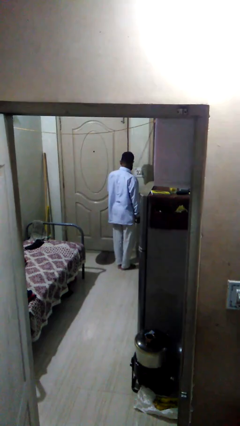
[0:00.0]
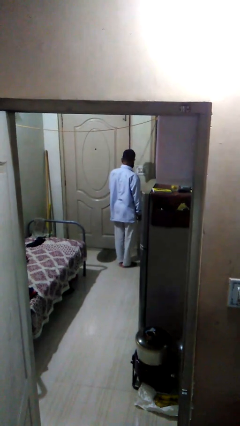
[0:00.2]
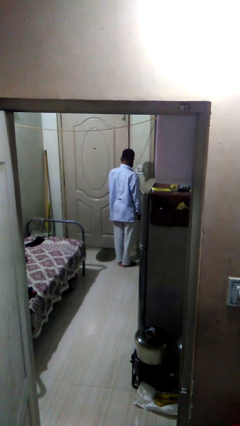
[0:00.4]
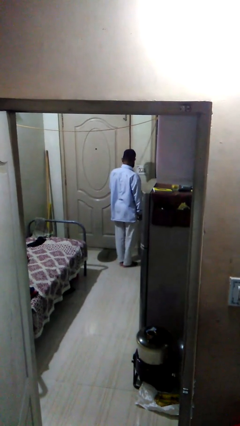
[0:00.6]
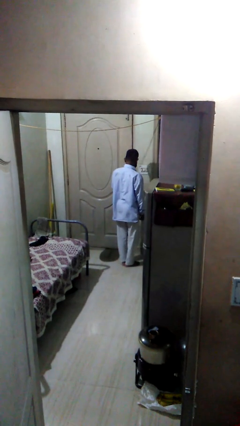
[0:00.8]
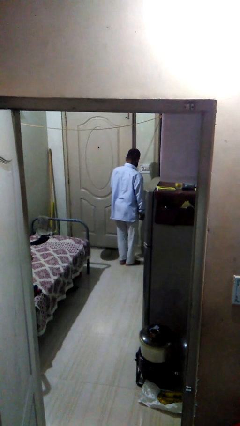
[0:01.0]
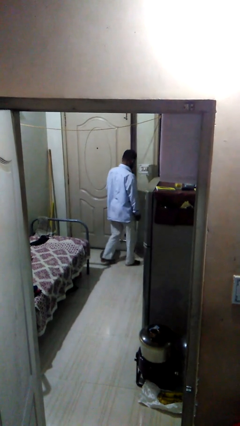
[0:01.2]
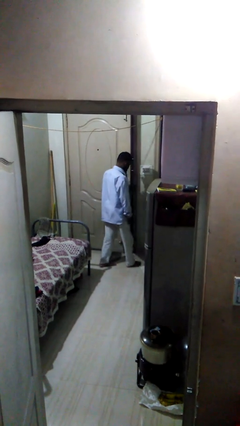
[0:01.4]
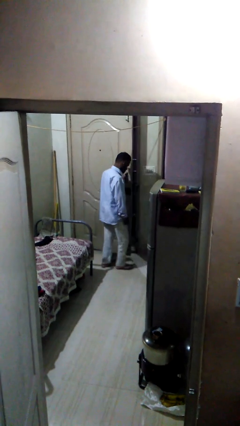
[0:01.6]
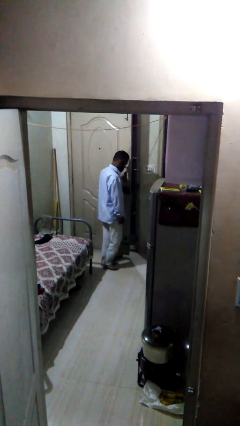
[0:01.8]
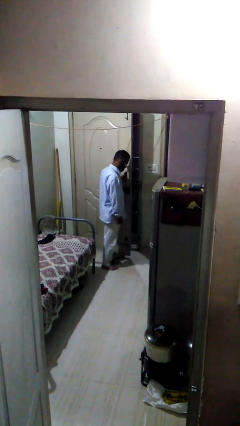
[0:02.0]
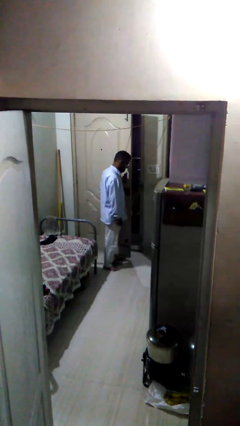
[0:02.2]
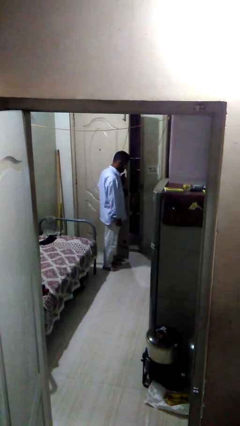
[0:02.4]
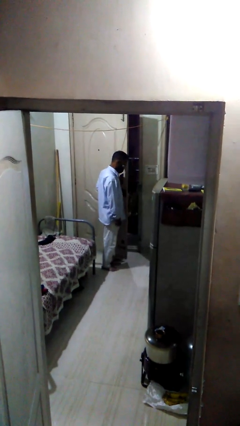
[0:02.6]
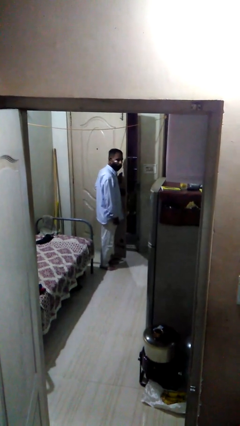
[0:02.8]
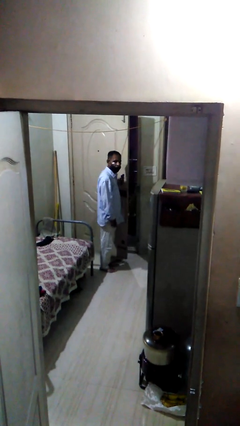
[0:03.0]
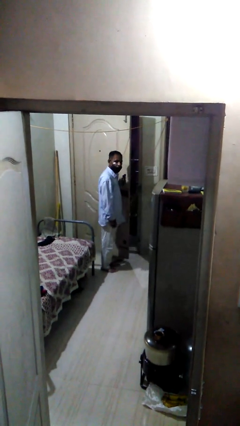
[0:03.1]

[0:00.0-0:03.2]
person opens facility door

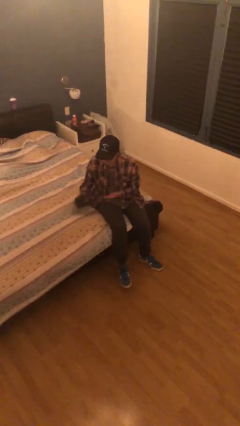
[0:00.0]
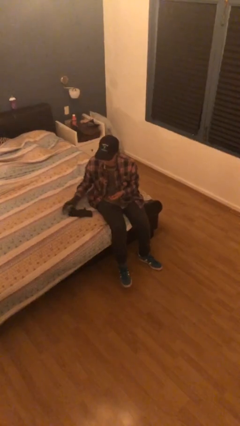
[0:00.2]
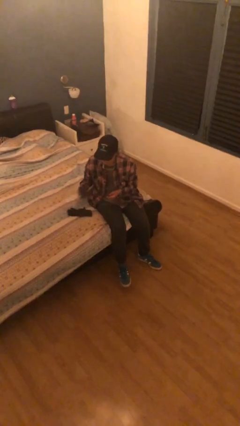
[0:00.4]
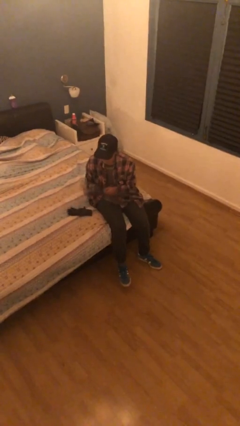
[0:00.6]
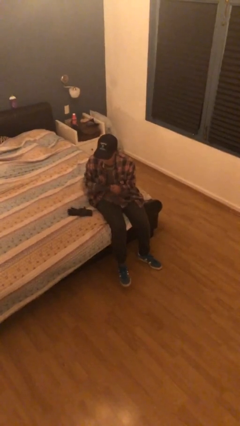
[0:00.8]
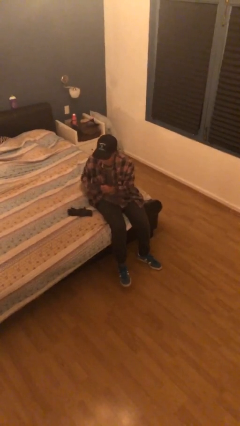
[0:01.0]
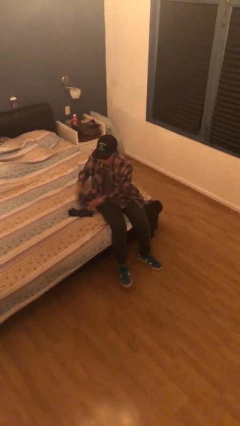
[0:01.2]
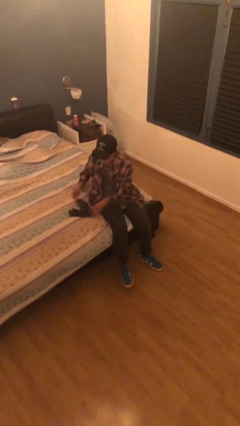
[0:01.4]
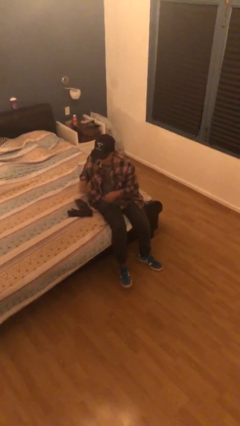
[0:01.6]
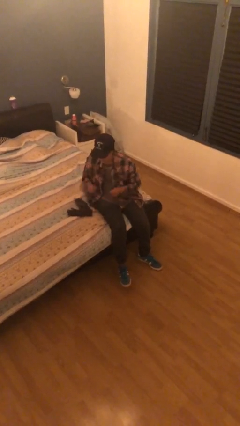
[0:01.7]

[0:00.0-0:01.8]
person takes off gloves

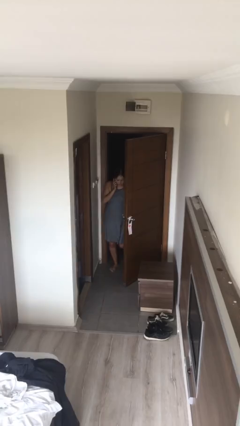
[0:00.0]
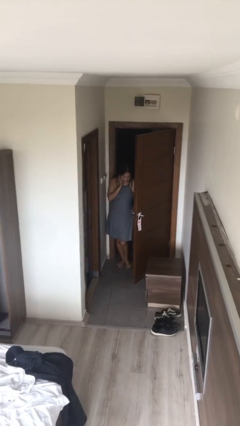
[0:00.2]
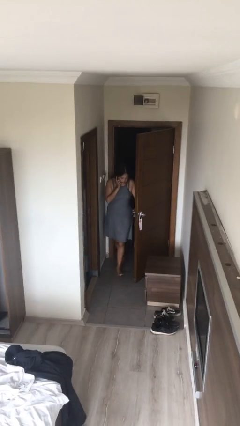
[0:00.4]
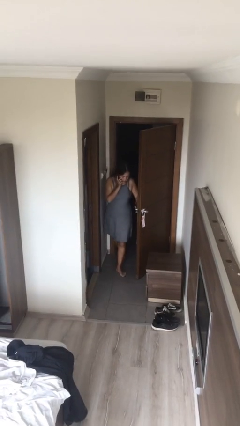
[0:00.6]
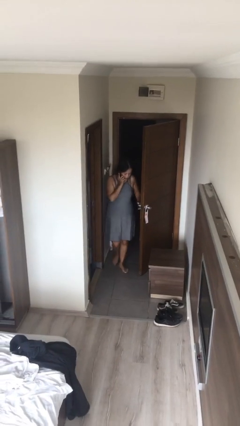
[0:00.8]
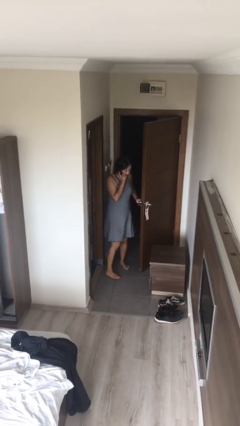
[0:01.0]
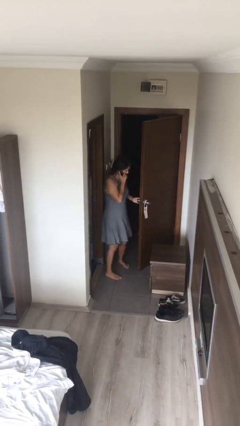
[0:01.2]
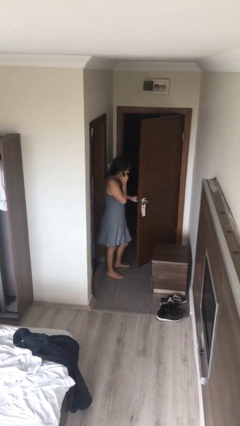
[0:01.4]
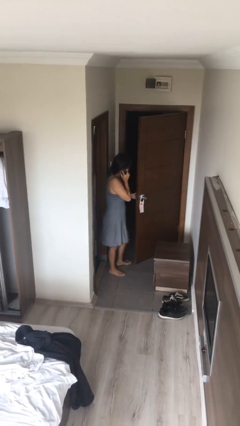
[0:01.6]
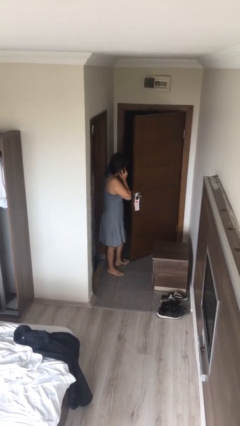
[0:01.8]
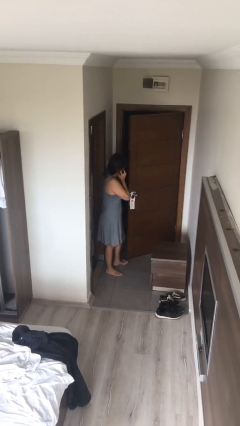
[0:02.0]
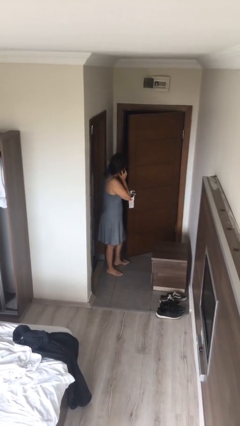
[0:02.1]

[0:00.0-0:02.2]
person enters scene through structure

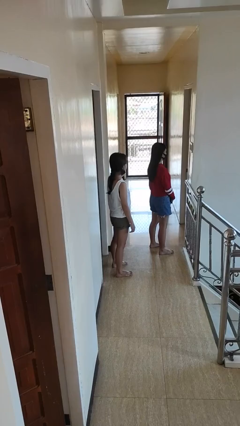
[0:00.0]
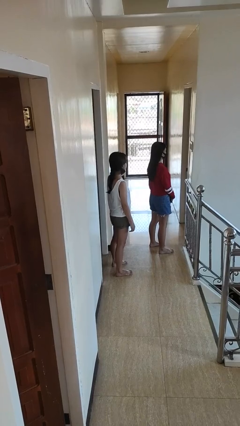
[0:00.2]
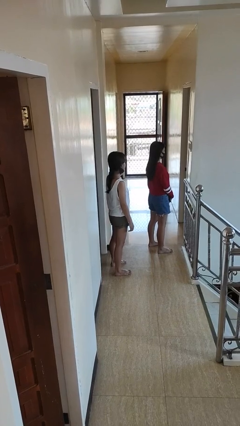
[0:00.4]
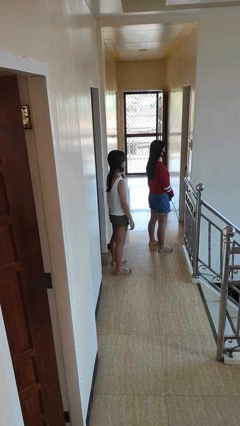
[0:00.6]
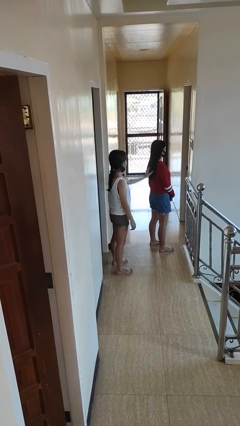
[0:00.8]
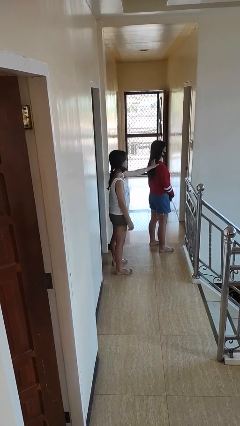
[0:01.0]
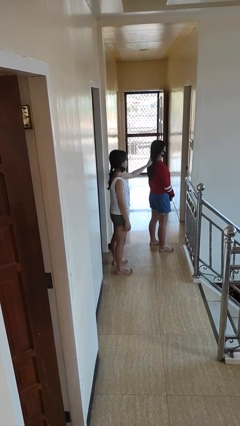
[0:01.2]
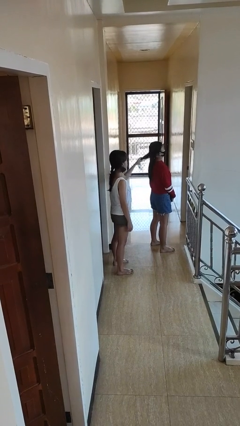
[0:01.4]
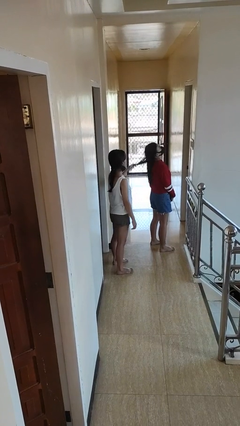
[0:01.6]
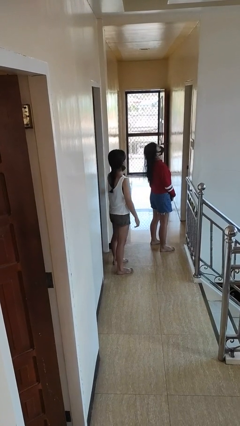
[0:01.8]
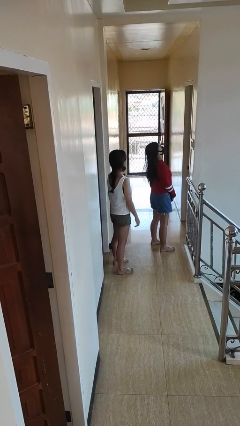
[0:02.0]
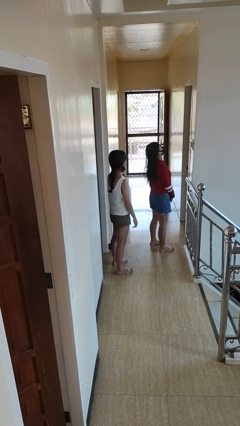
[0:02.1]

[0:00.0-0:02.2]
person grabs person by hair

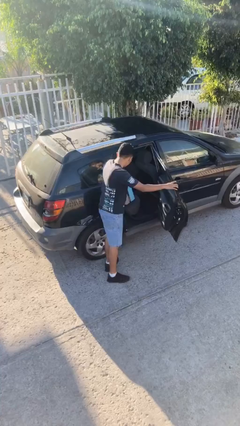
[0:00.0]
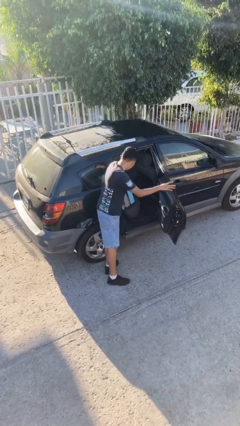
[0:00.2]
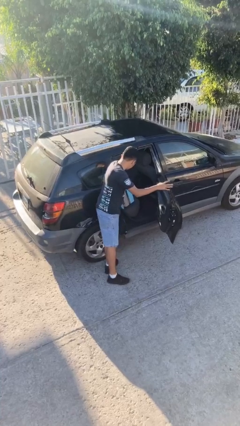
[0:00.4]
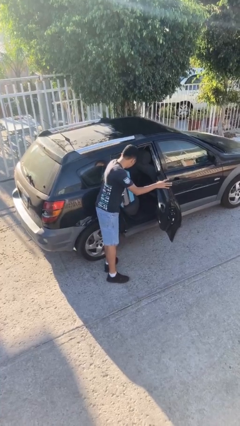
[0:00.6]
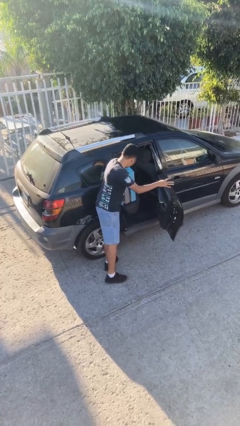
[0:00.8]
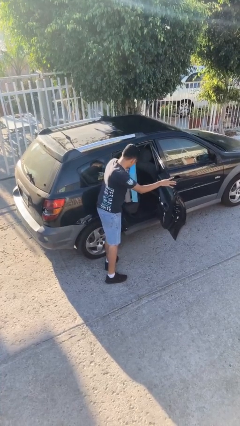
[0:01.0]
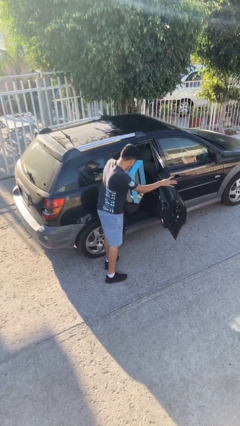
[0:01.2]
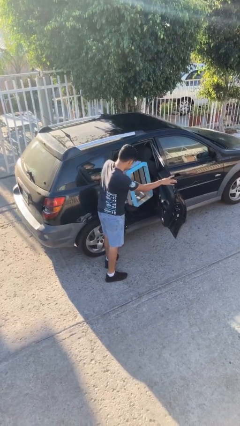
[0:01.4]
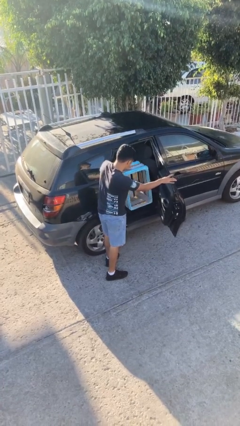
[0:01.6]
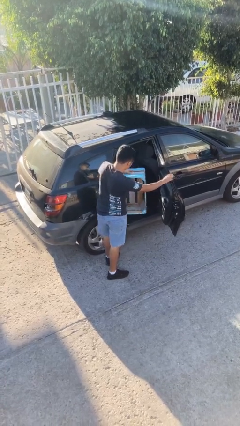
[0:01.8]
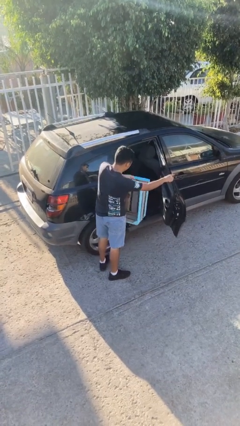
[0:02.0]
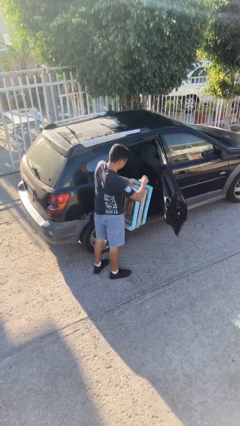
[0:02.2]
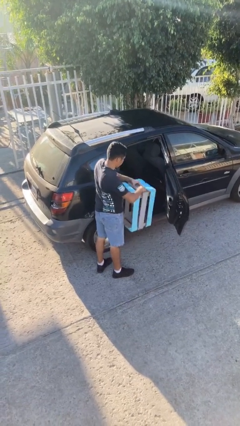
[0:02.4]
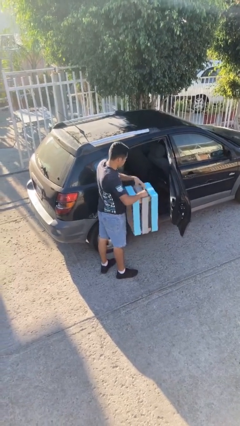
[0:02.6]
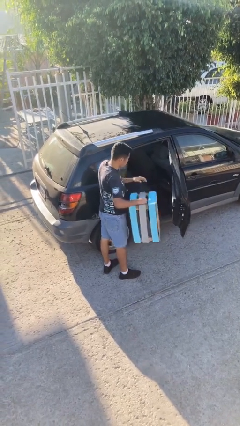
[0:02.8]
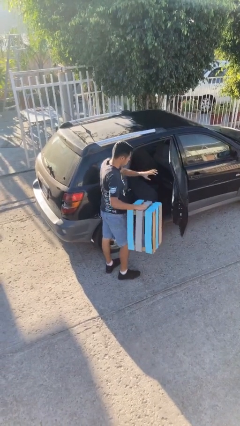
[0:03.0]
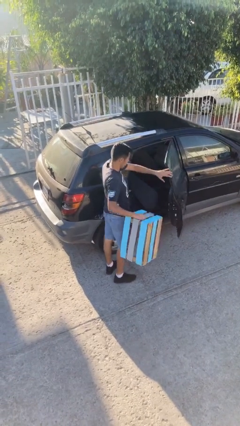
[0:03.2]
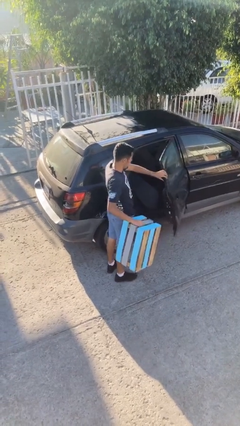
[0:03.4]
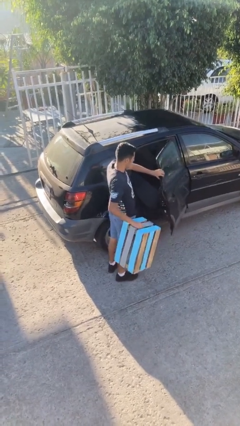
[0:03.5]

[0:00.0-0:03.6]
person unloads car

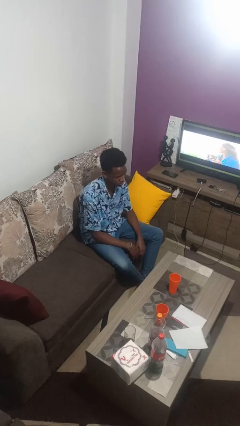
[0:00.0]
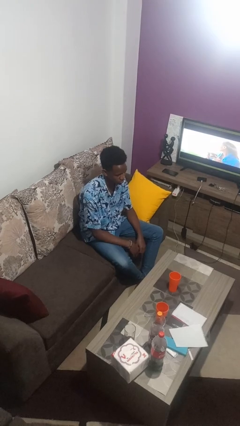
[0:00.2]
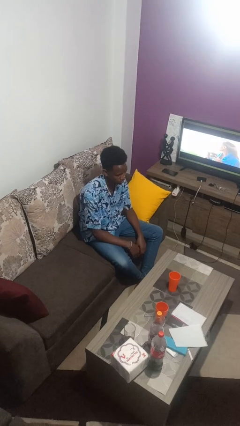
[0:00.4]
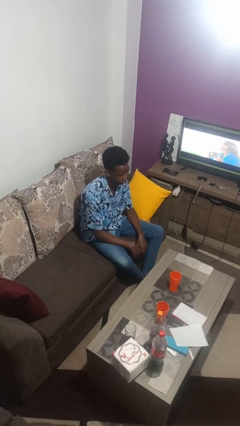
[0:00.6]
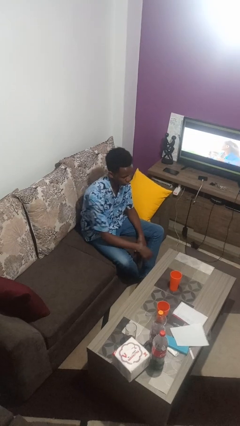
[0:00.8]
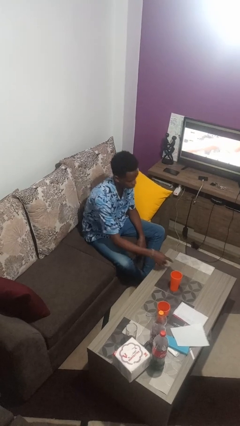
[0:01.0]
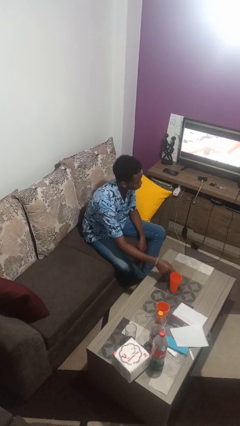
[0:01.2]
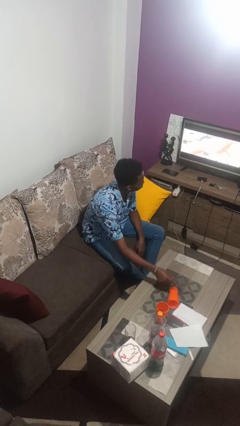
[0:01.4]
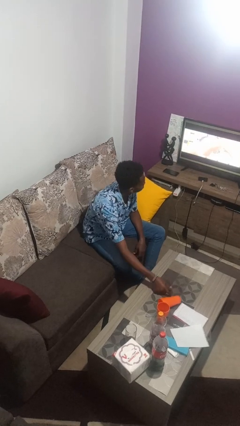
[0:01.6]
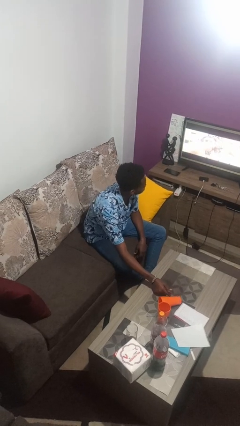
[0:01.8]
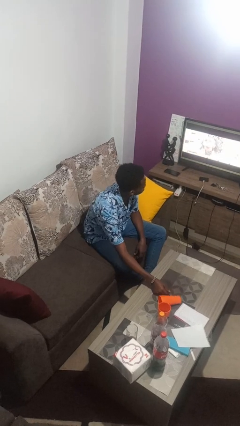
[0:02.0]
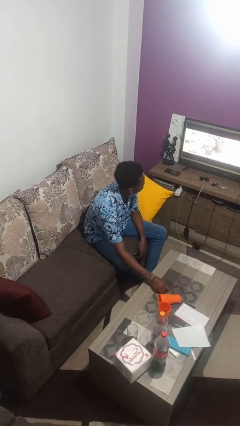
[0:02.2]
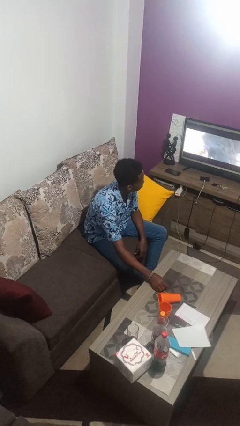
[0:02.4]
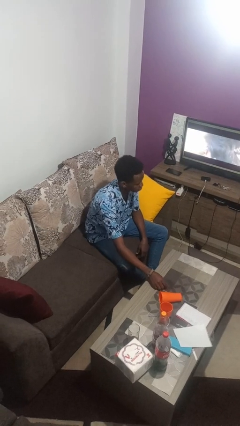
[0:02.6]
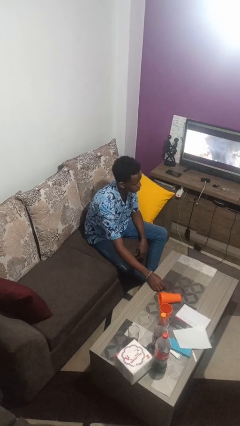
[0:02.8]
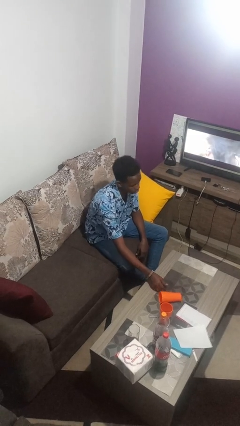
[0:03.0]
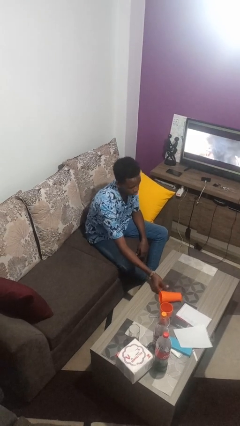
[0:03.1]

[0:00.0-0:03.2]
person knocks over glass

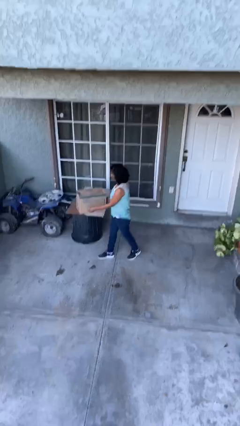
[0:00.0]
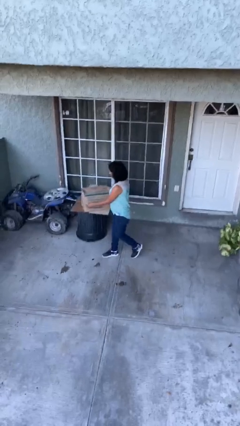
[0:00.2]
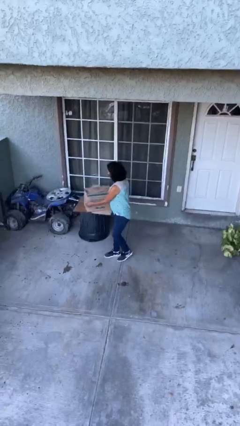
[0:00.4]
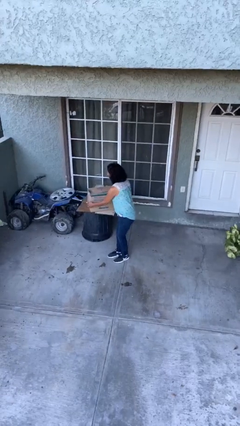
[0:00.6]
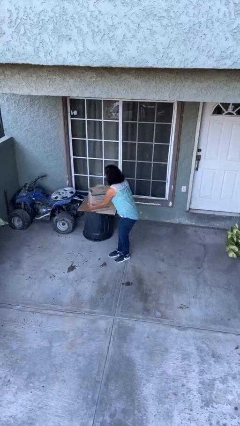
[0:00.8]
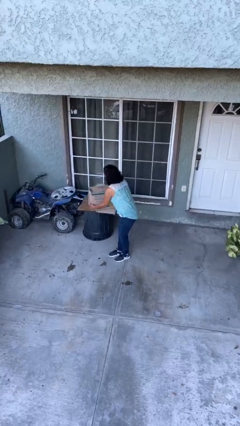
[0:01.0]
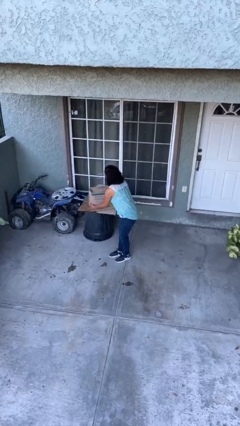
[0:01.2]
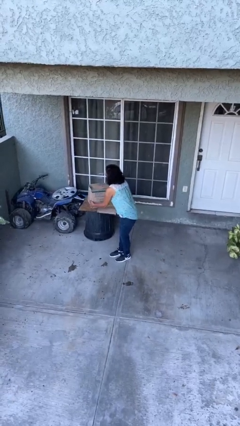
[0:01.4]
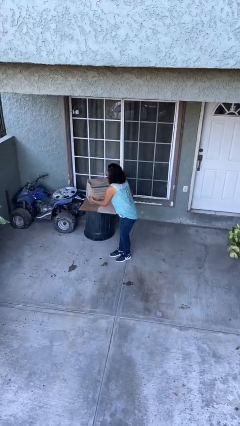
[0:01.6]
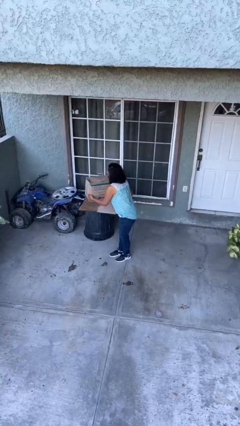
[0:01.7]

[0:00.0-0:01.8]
person picks up object from table
